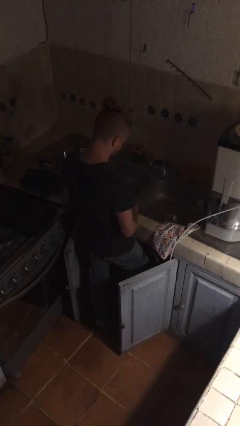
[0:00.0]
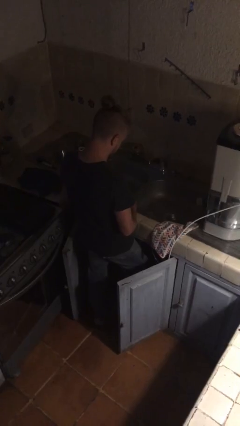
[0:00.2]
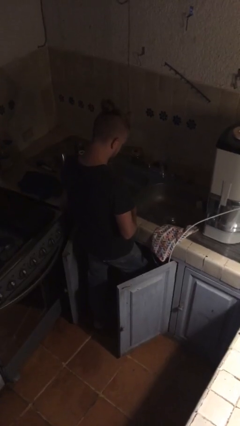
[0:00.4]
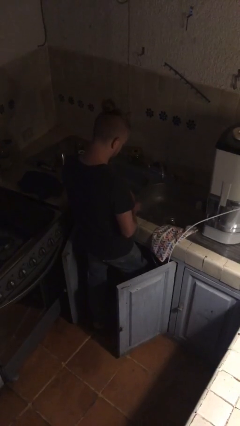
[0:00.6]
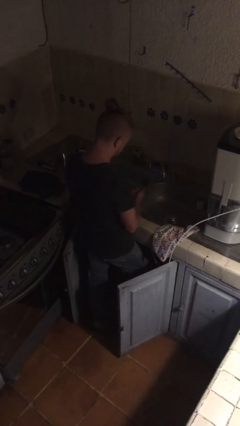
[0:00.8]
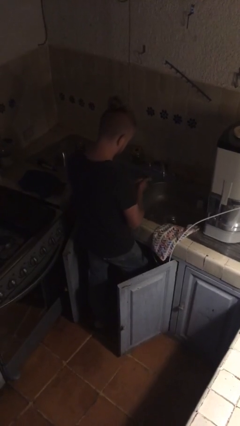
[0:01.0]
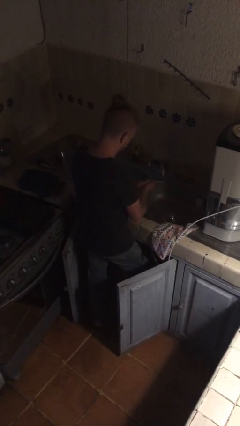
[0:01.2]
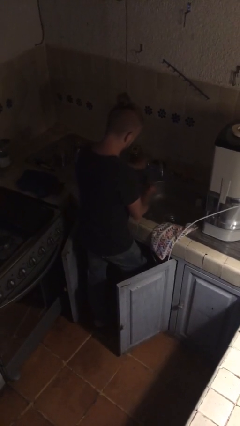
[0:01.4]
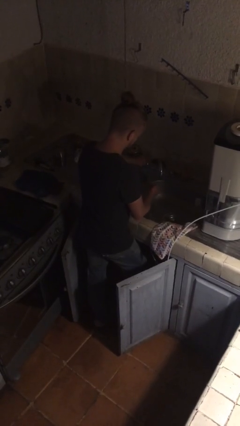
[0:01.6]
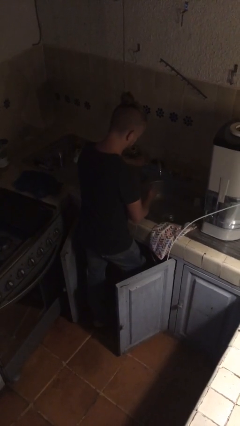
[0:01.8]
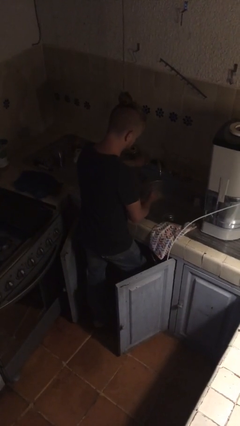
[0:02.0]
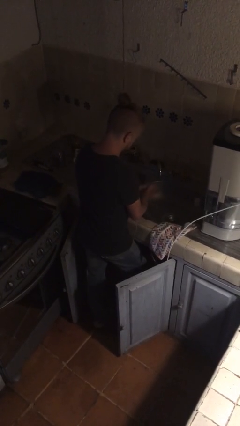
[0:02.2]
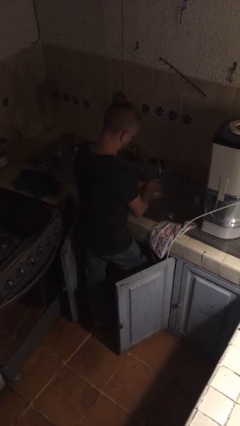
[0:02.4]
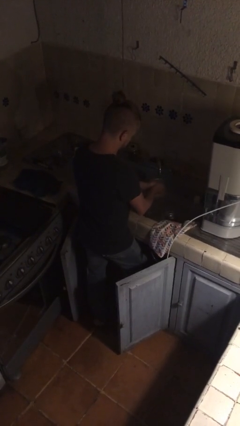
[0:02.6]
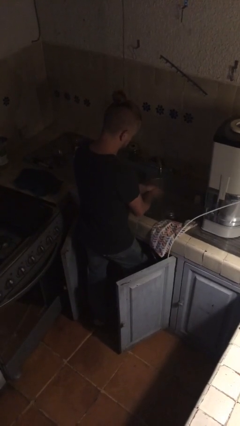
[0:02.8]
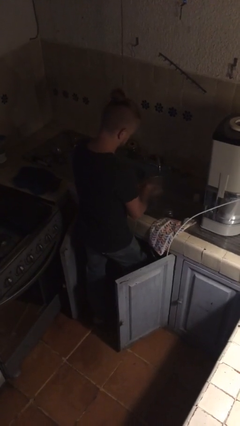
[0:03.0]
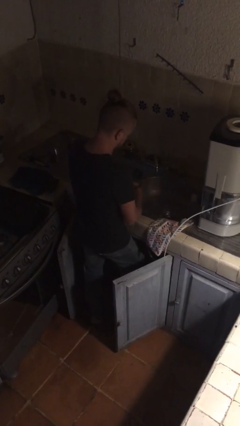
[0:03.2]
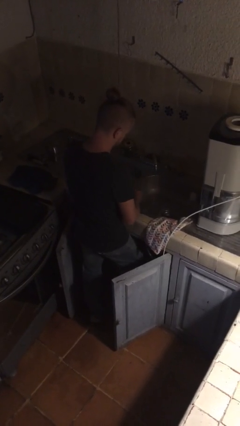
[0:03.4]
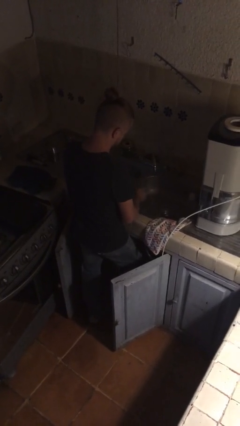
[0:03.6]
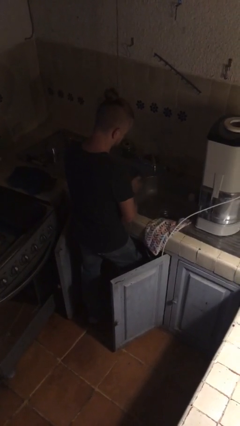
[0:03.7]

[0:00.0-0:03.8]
person washes hands

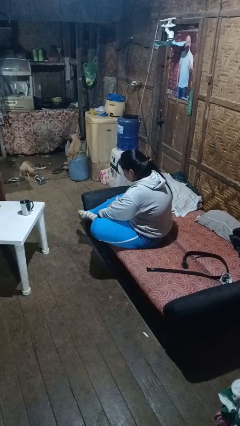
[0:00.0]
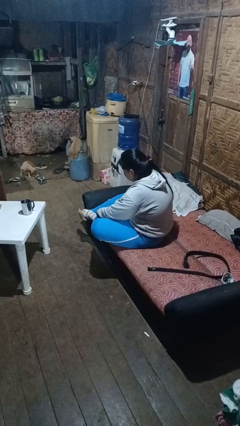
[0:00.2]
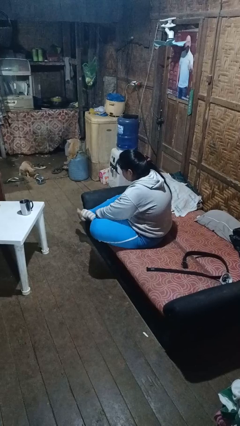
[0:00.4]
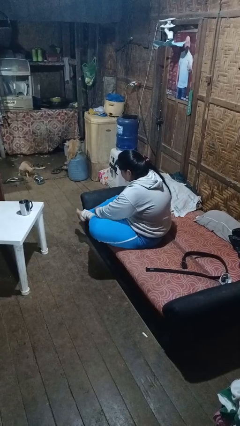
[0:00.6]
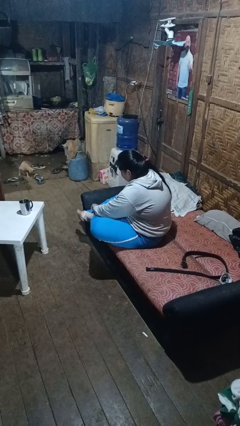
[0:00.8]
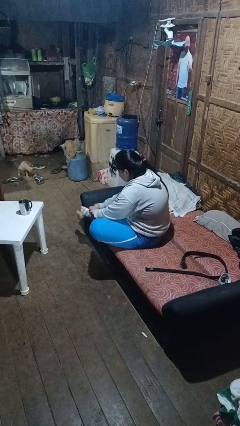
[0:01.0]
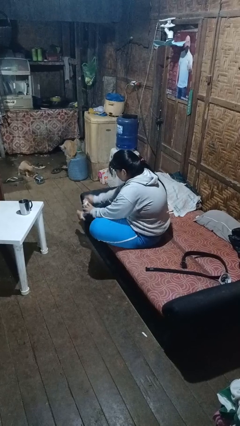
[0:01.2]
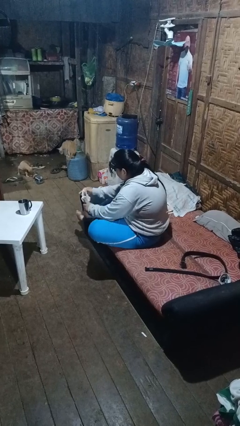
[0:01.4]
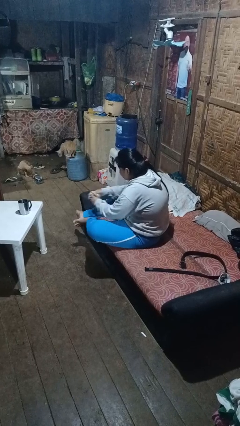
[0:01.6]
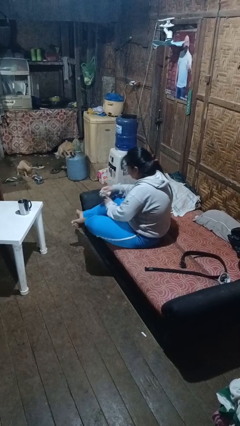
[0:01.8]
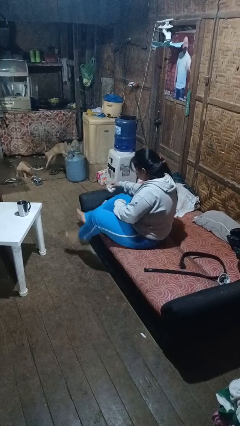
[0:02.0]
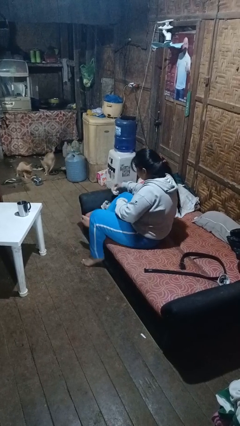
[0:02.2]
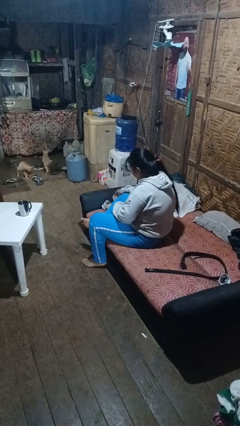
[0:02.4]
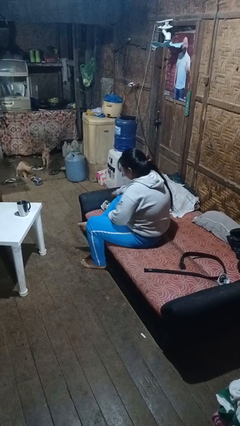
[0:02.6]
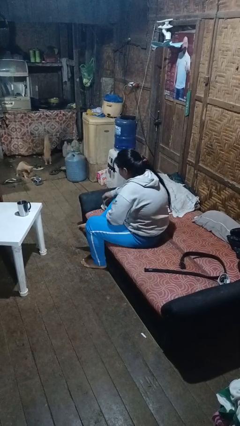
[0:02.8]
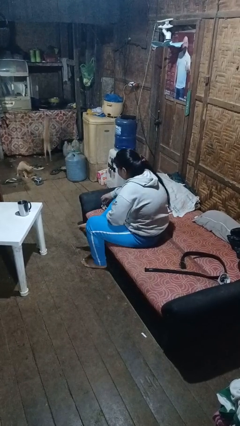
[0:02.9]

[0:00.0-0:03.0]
person takes off socks

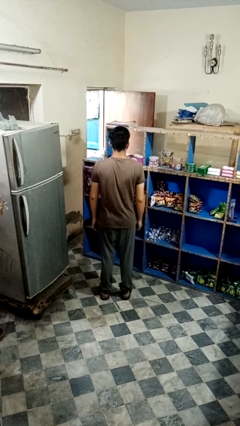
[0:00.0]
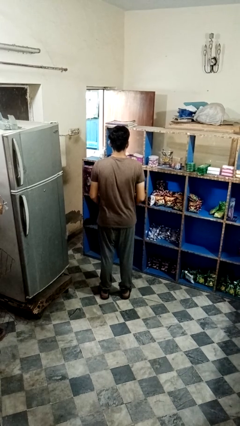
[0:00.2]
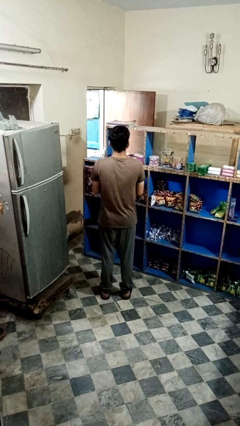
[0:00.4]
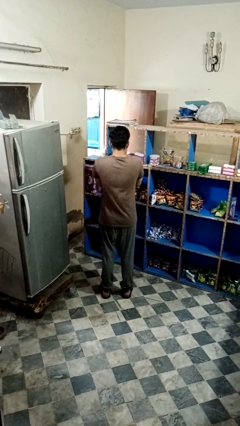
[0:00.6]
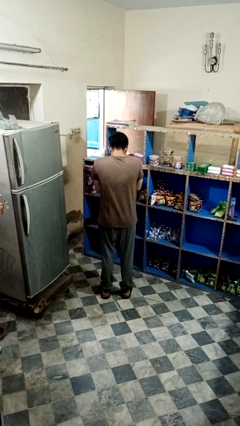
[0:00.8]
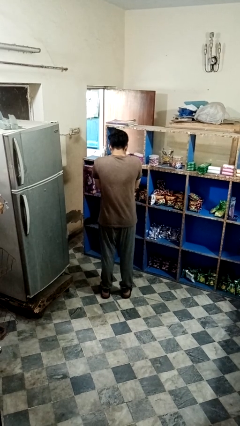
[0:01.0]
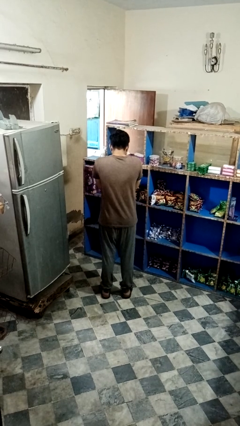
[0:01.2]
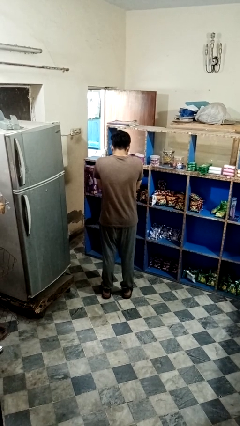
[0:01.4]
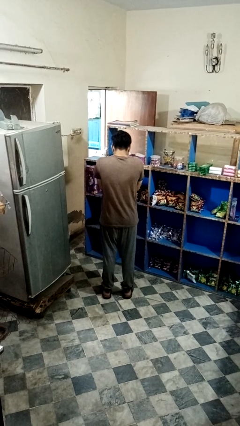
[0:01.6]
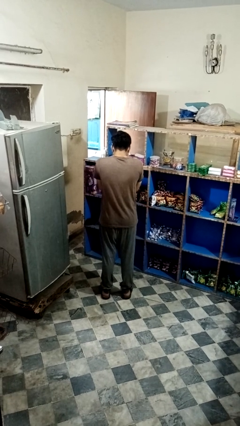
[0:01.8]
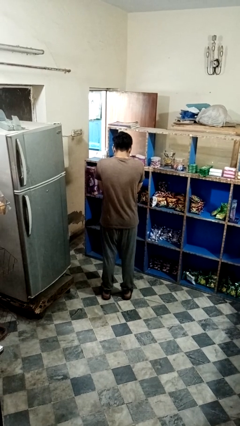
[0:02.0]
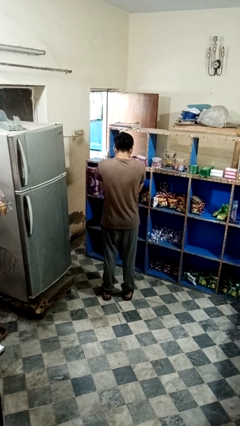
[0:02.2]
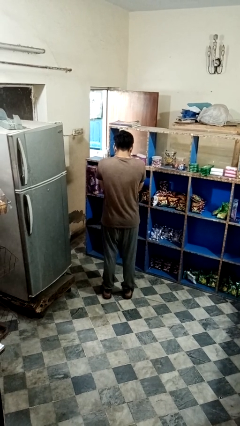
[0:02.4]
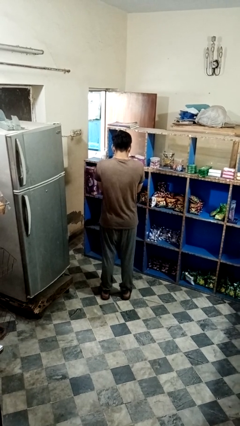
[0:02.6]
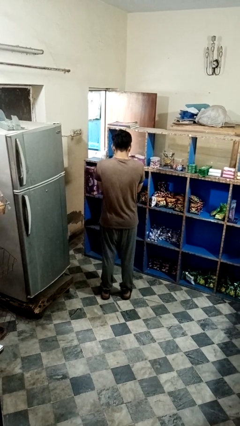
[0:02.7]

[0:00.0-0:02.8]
person sneezes into hand

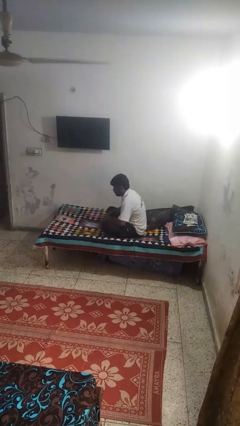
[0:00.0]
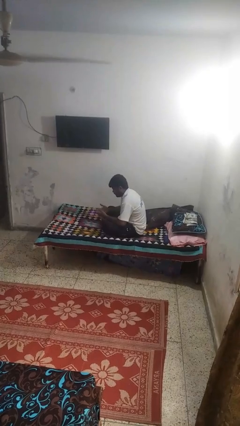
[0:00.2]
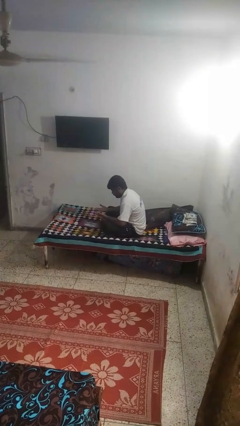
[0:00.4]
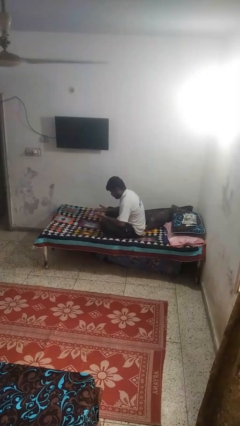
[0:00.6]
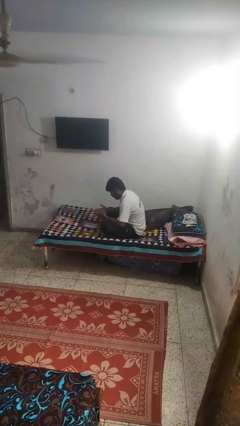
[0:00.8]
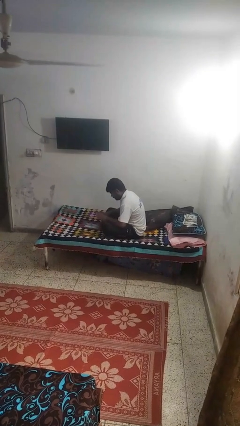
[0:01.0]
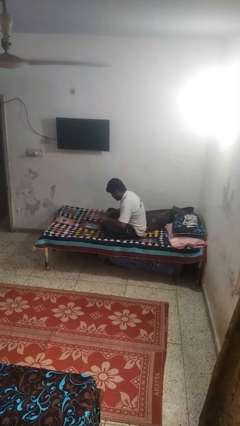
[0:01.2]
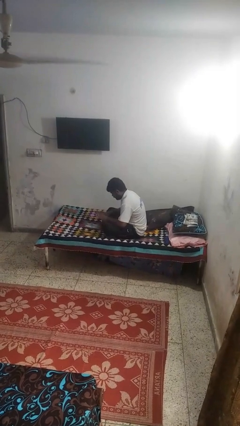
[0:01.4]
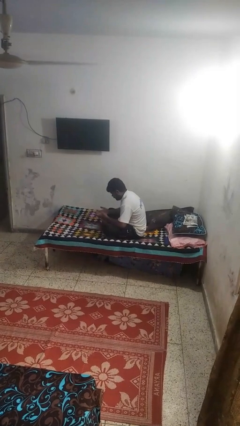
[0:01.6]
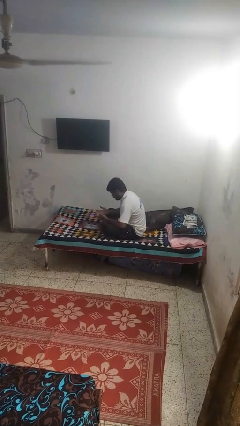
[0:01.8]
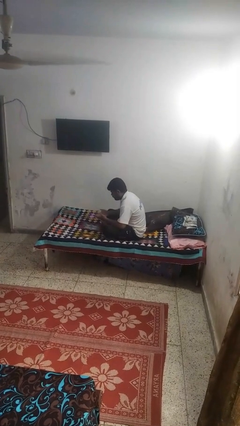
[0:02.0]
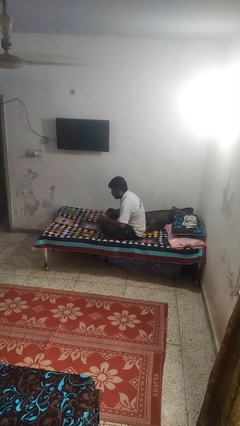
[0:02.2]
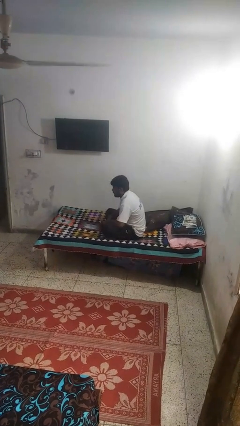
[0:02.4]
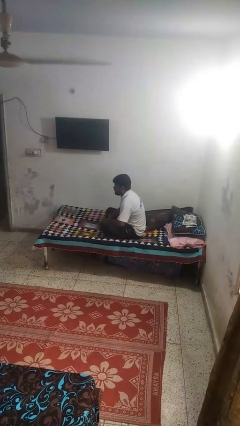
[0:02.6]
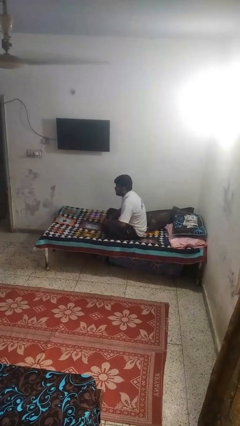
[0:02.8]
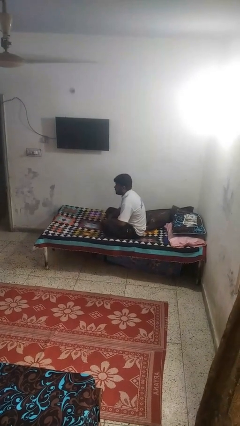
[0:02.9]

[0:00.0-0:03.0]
person looks at hands in lap

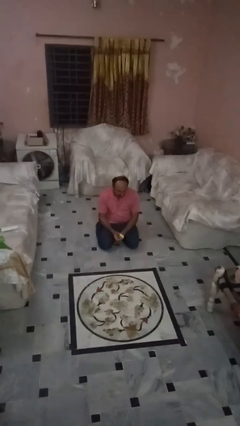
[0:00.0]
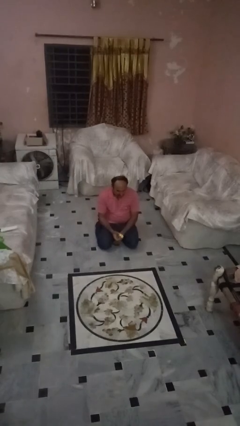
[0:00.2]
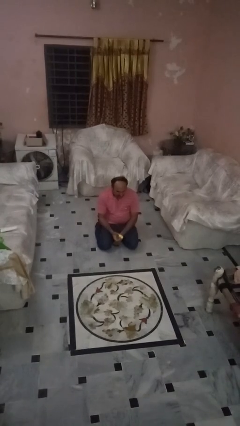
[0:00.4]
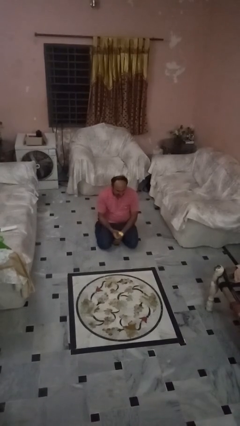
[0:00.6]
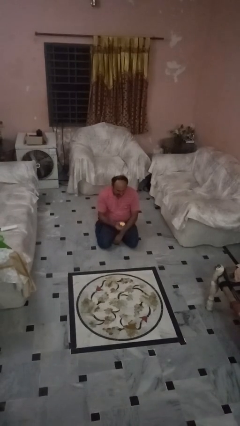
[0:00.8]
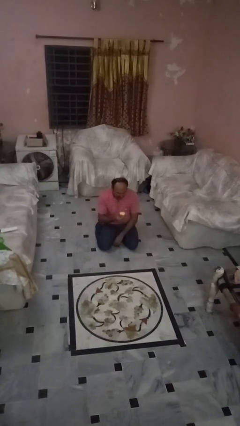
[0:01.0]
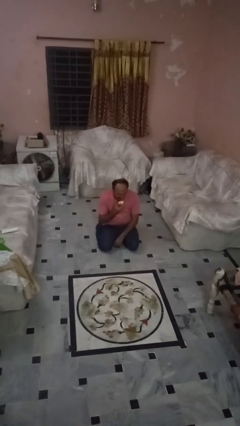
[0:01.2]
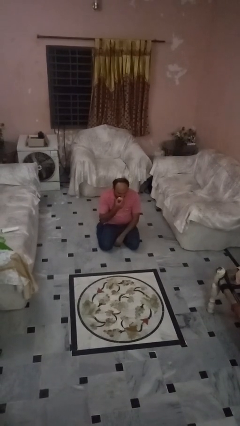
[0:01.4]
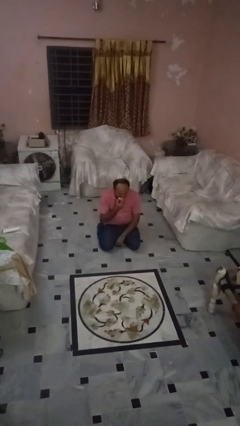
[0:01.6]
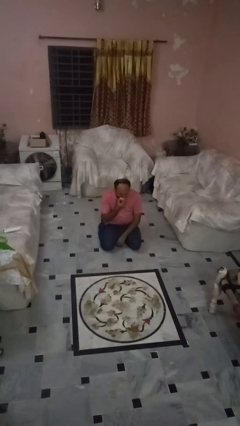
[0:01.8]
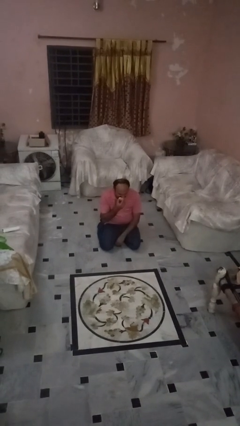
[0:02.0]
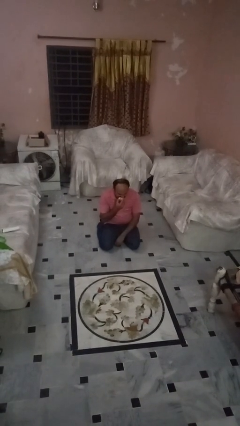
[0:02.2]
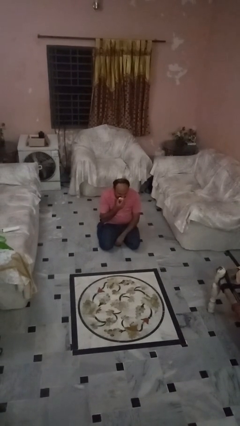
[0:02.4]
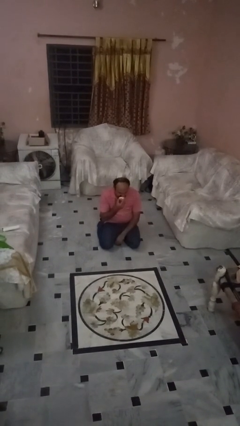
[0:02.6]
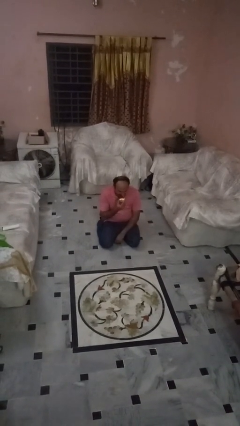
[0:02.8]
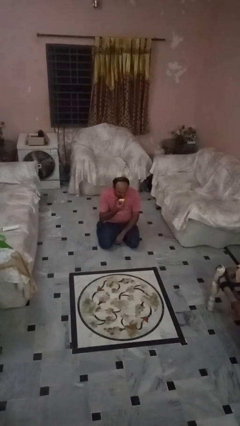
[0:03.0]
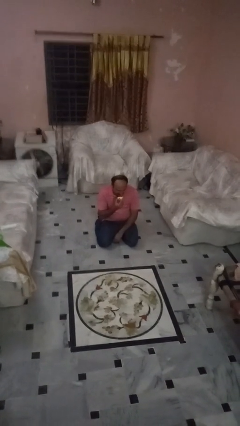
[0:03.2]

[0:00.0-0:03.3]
person eats apple

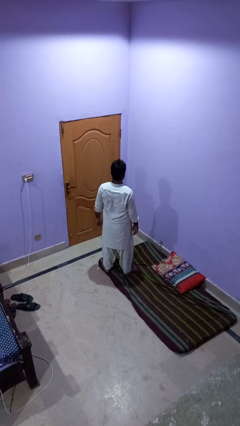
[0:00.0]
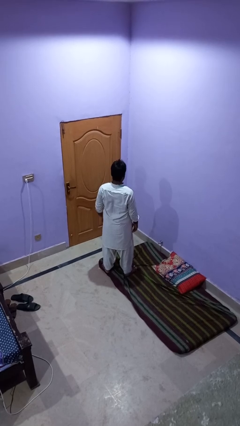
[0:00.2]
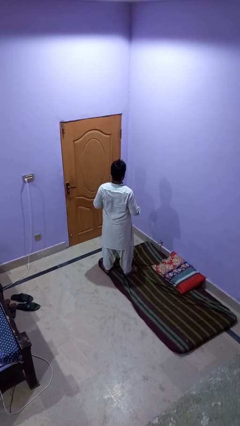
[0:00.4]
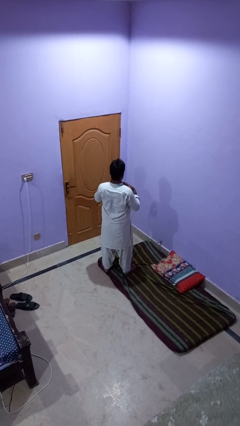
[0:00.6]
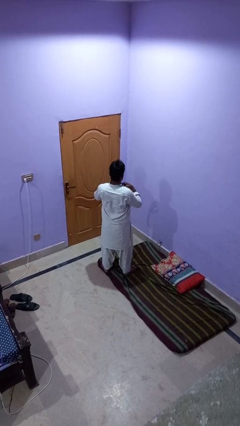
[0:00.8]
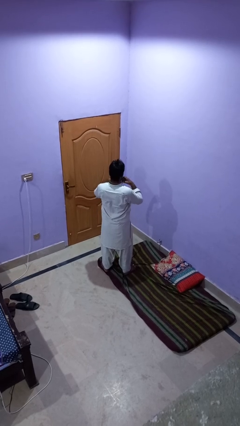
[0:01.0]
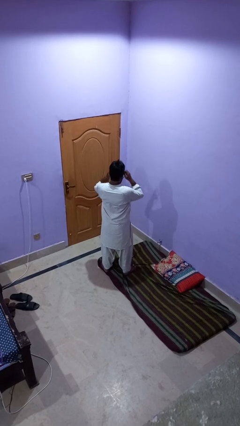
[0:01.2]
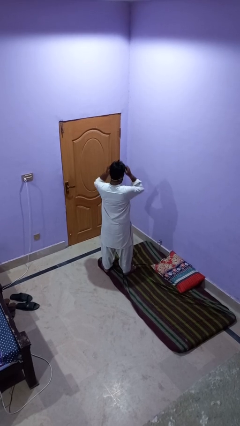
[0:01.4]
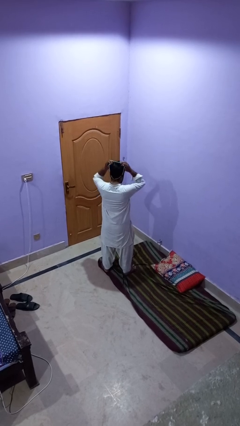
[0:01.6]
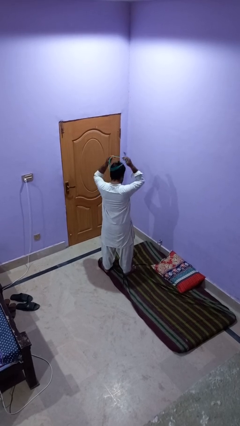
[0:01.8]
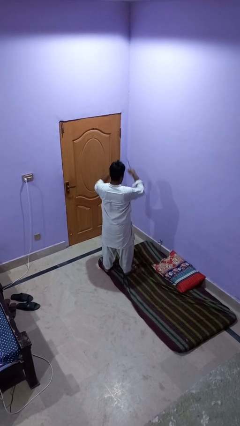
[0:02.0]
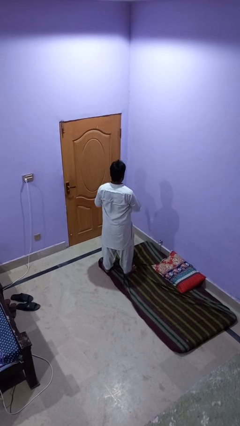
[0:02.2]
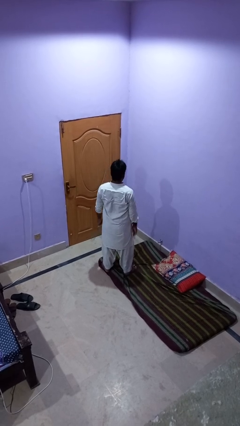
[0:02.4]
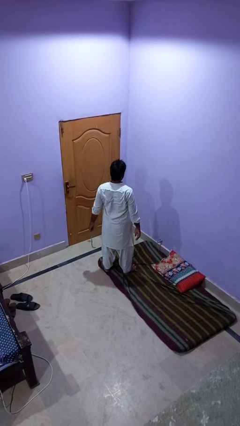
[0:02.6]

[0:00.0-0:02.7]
person takes off necklace
